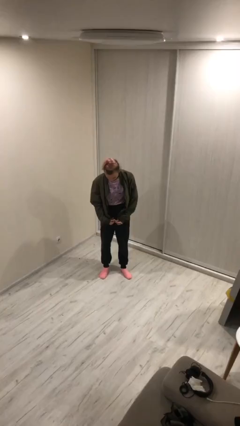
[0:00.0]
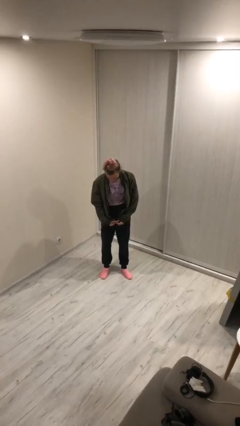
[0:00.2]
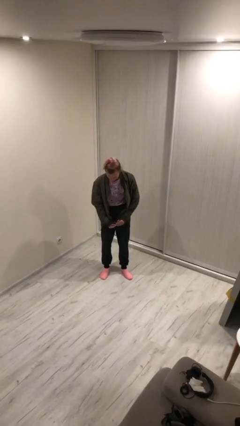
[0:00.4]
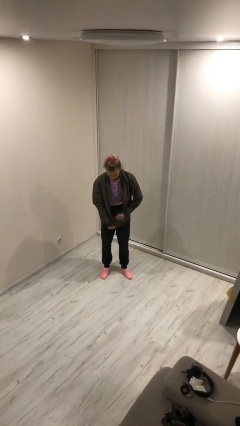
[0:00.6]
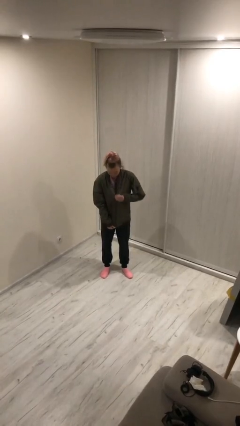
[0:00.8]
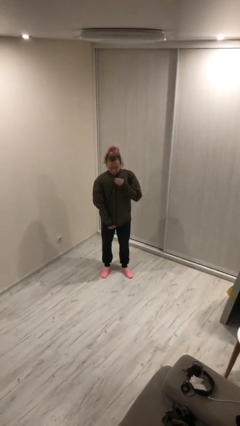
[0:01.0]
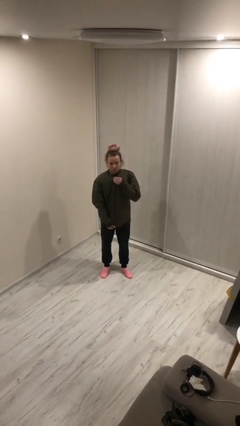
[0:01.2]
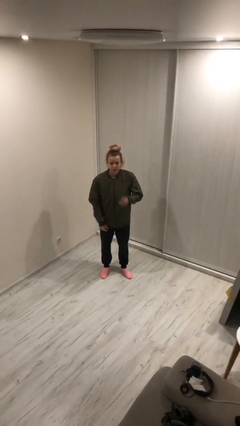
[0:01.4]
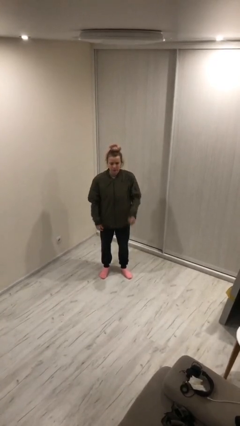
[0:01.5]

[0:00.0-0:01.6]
person zips up jacket

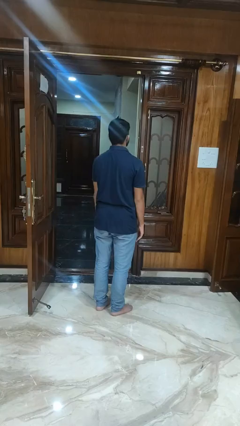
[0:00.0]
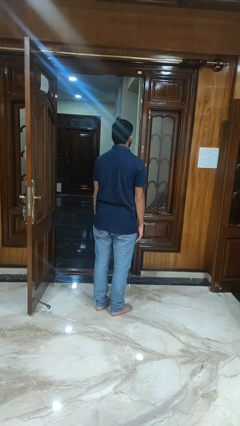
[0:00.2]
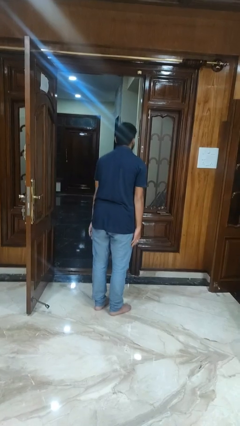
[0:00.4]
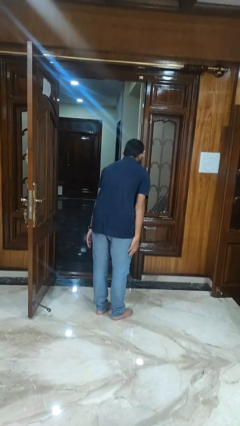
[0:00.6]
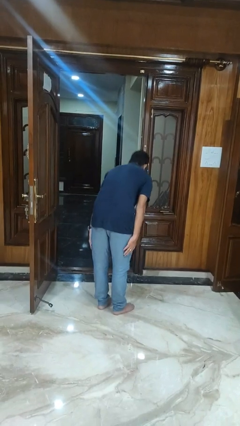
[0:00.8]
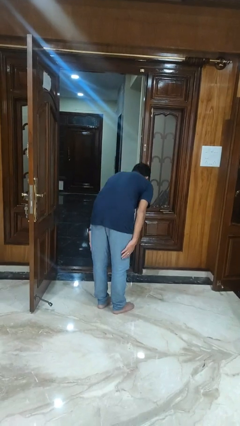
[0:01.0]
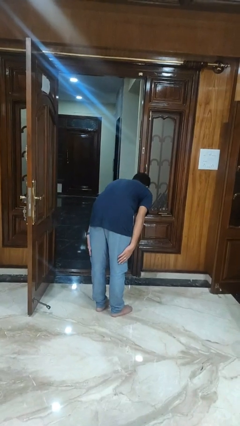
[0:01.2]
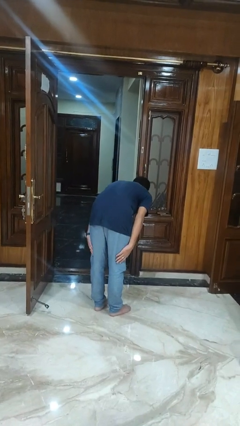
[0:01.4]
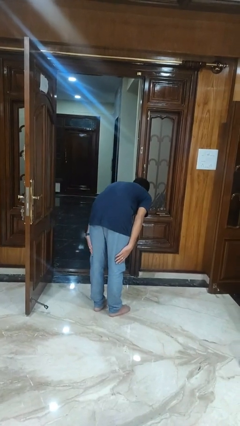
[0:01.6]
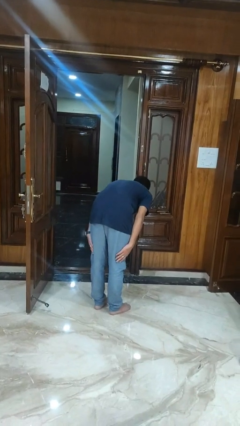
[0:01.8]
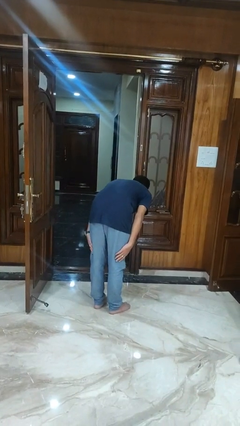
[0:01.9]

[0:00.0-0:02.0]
person bows

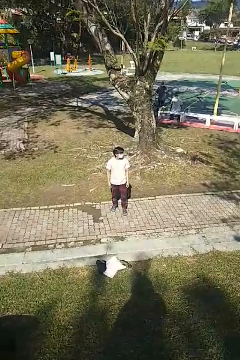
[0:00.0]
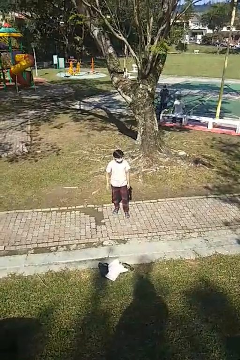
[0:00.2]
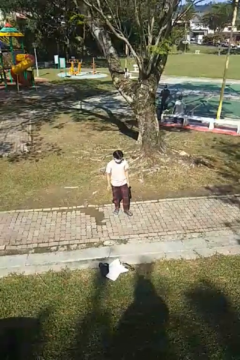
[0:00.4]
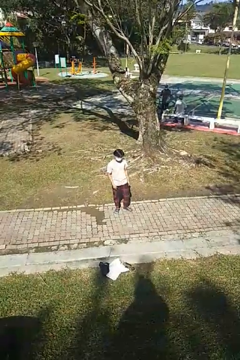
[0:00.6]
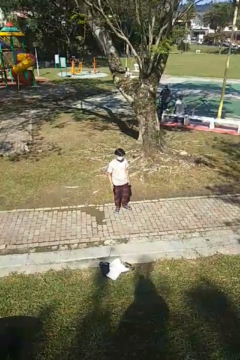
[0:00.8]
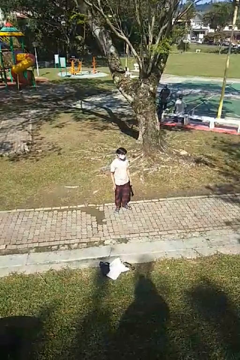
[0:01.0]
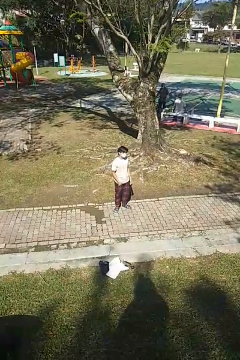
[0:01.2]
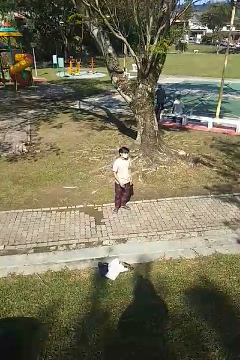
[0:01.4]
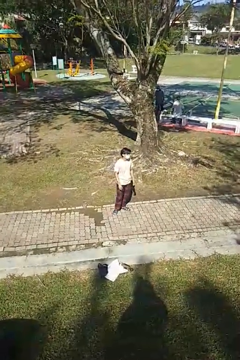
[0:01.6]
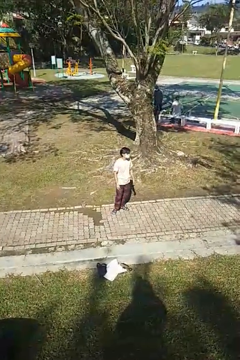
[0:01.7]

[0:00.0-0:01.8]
person slaps hands on thighs

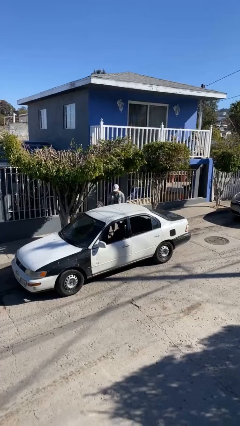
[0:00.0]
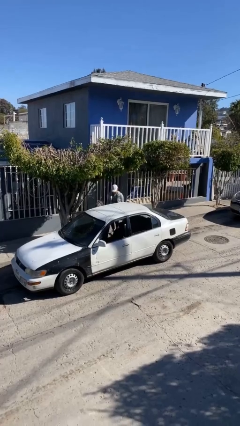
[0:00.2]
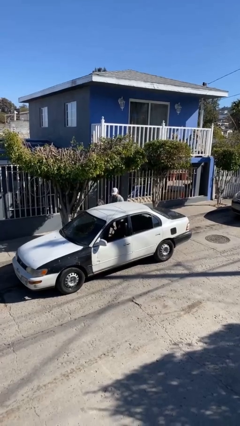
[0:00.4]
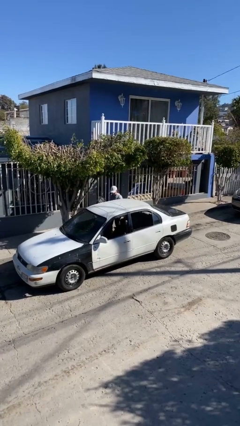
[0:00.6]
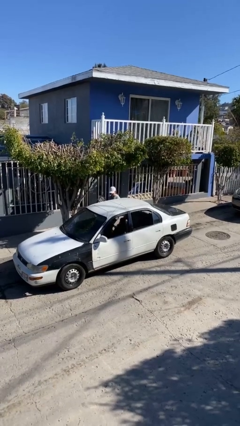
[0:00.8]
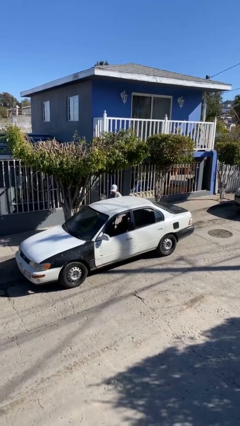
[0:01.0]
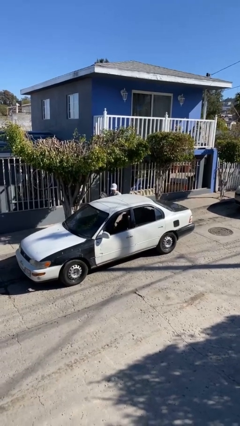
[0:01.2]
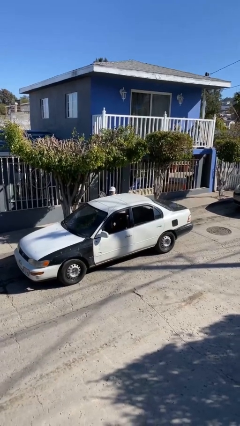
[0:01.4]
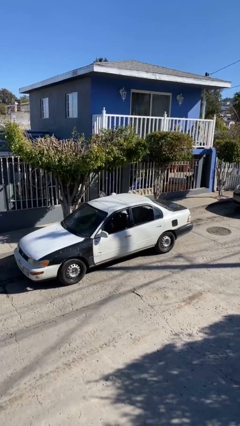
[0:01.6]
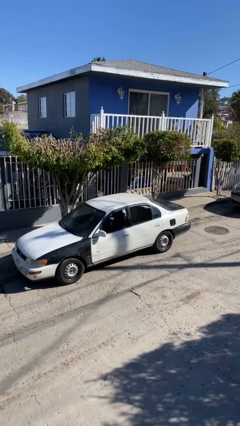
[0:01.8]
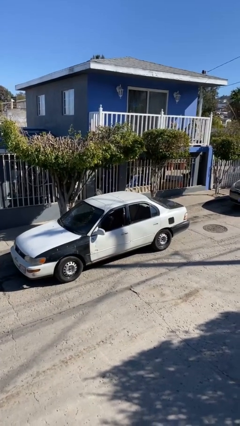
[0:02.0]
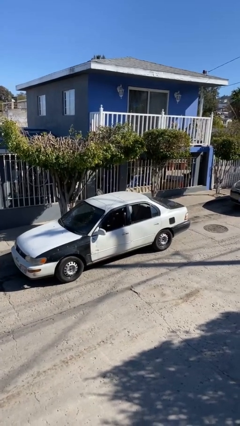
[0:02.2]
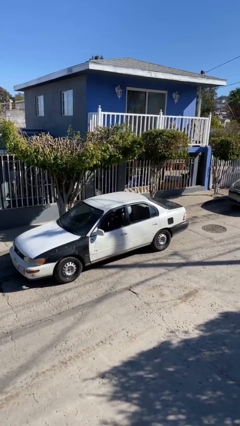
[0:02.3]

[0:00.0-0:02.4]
person enters car

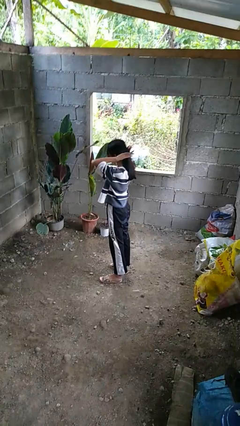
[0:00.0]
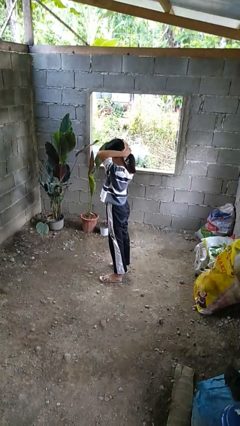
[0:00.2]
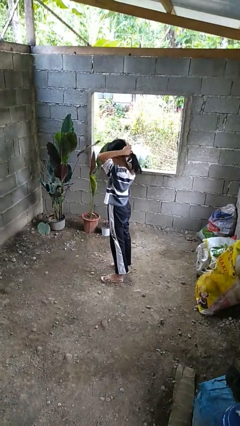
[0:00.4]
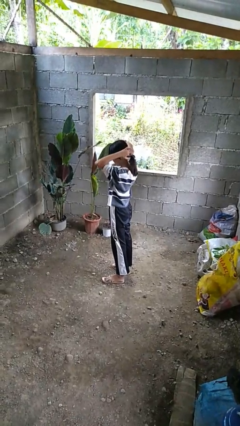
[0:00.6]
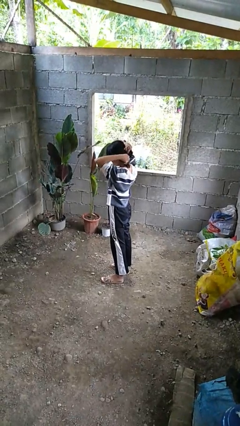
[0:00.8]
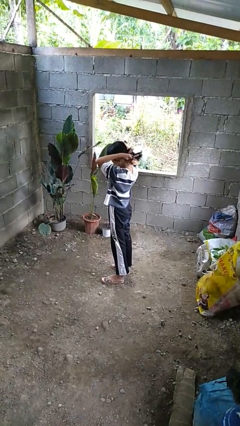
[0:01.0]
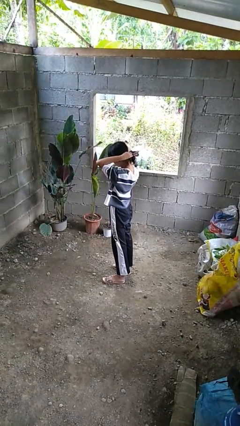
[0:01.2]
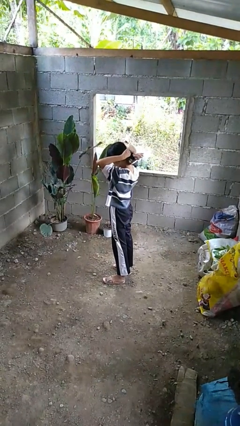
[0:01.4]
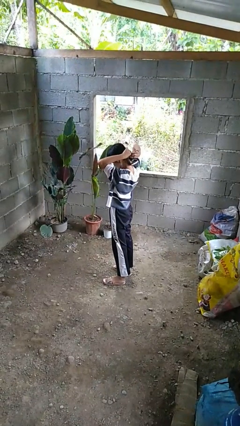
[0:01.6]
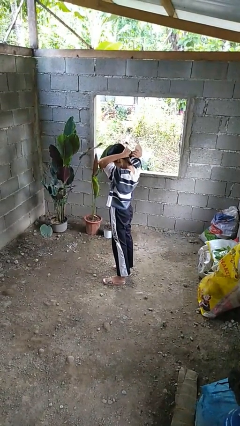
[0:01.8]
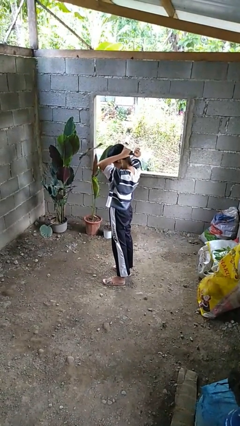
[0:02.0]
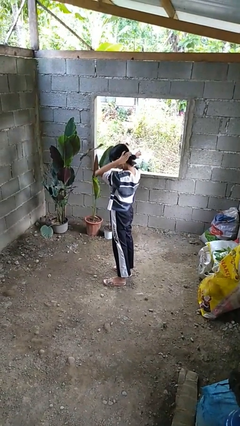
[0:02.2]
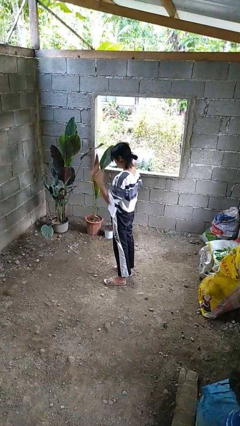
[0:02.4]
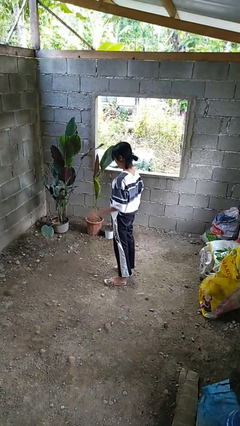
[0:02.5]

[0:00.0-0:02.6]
person puts hair in ponytail

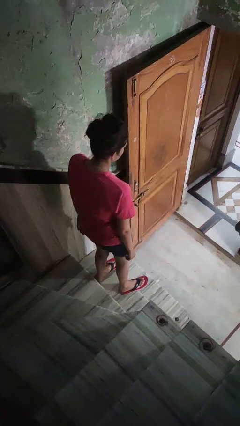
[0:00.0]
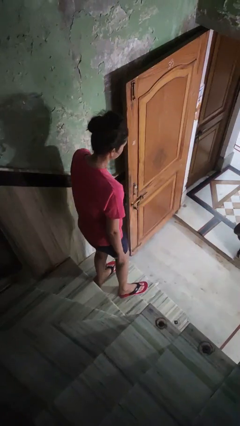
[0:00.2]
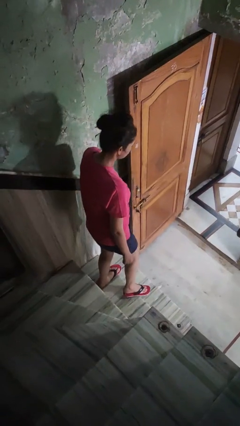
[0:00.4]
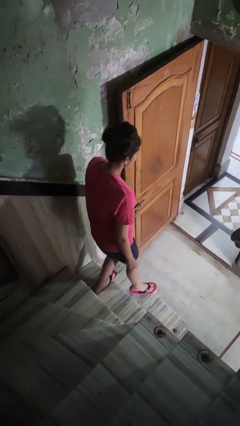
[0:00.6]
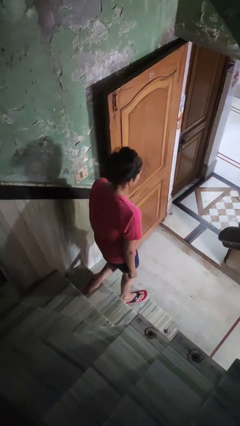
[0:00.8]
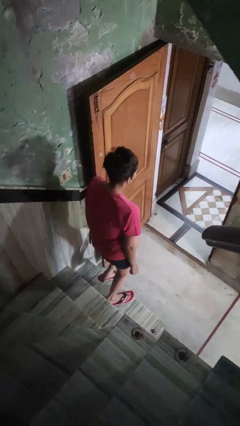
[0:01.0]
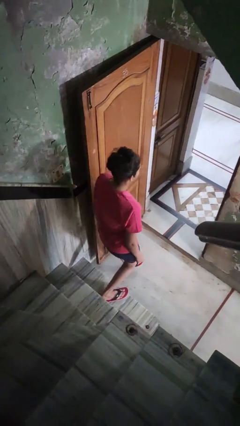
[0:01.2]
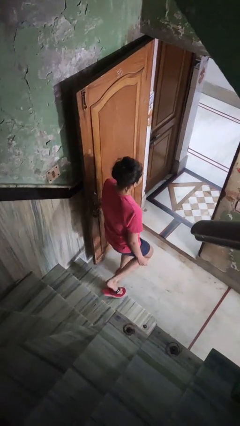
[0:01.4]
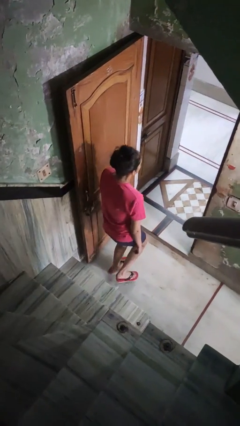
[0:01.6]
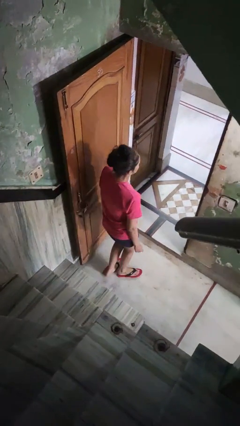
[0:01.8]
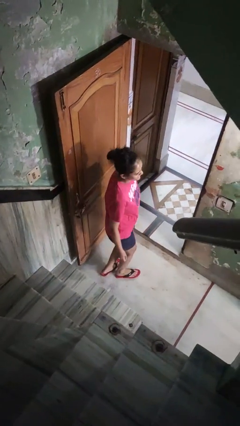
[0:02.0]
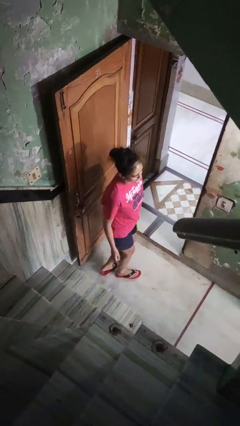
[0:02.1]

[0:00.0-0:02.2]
person climbs down stairs

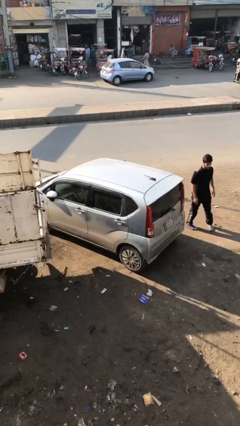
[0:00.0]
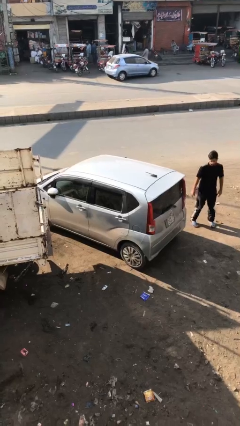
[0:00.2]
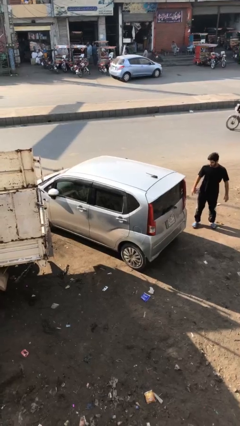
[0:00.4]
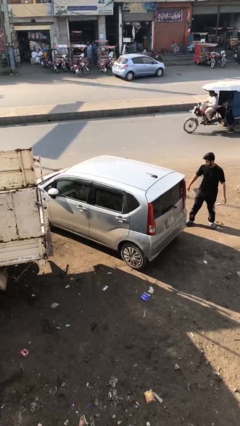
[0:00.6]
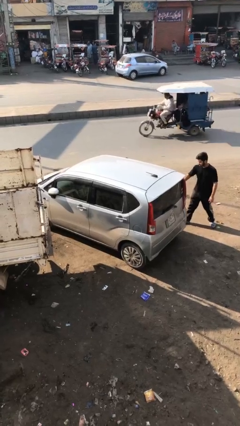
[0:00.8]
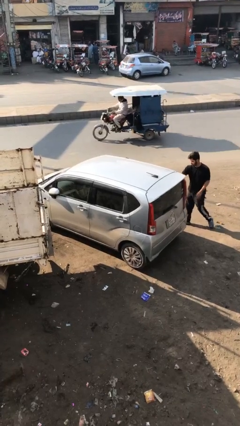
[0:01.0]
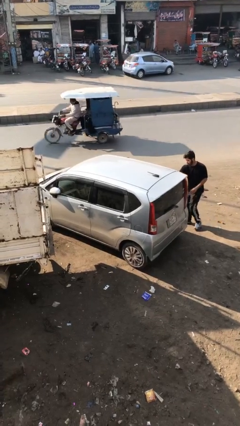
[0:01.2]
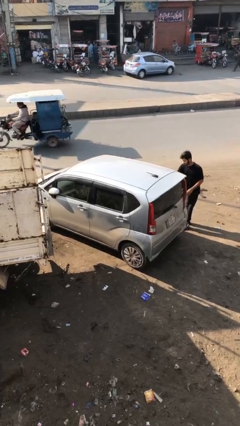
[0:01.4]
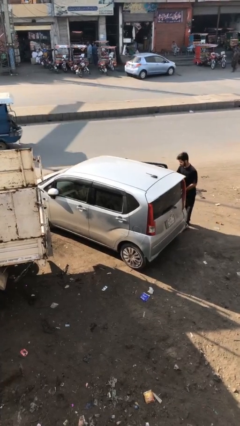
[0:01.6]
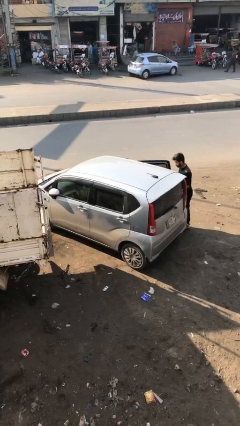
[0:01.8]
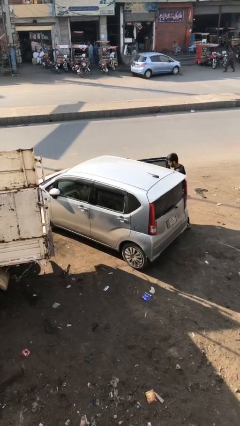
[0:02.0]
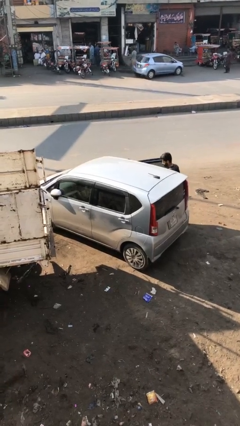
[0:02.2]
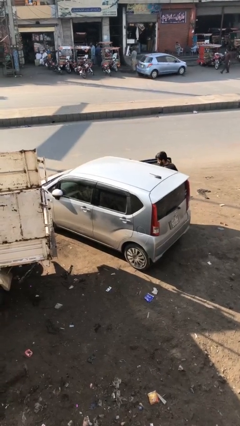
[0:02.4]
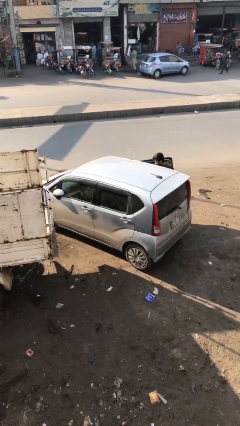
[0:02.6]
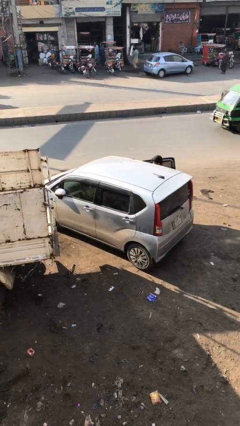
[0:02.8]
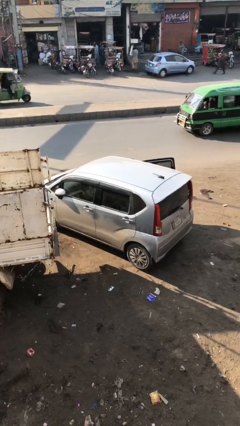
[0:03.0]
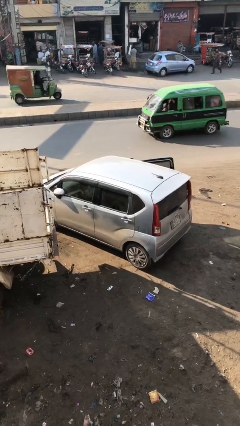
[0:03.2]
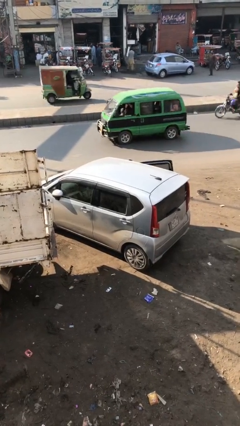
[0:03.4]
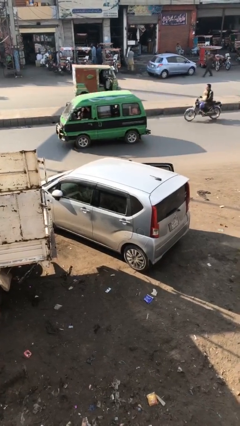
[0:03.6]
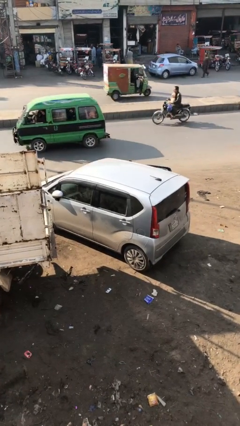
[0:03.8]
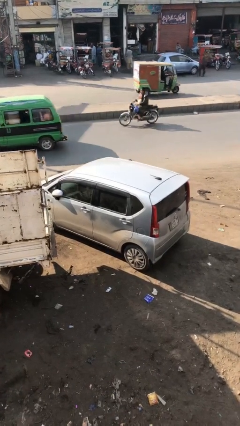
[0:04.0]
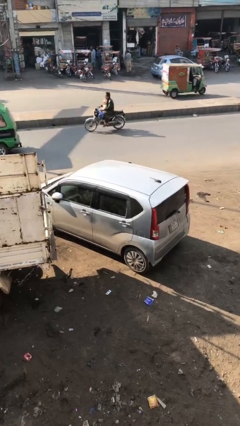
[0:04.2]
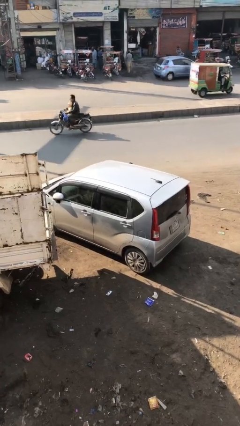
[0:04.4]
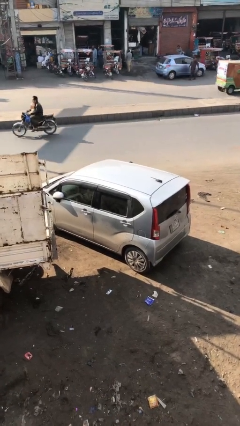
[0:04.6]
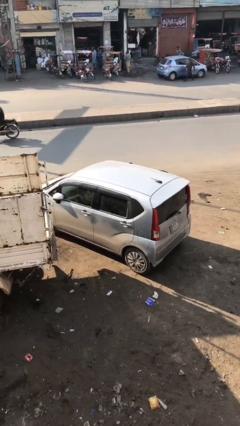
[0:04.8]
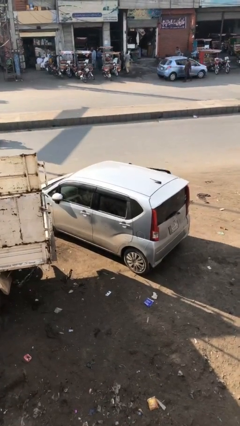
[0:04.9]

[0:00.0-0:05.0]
car picks up person
